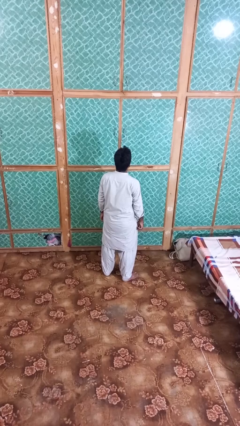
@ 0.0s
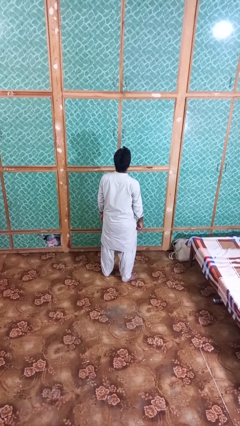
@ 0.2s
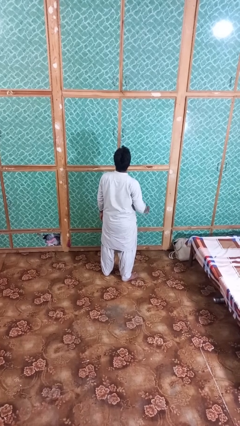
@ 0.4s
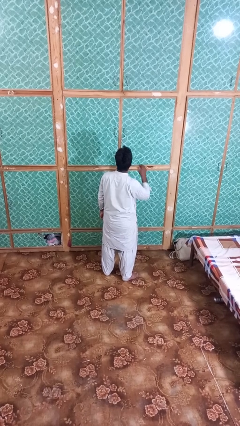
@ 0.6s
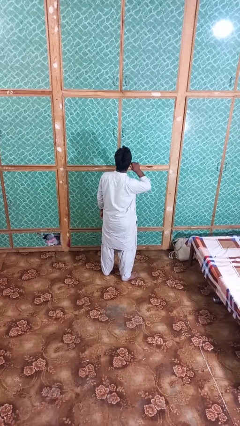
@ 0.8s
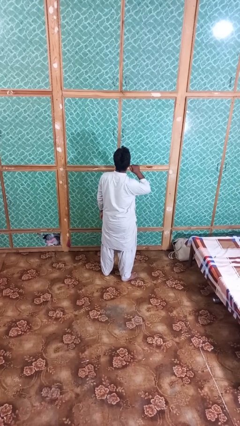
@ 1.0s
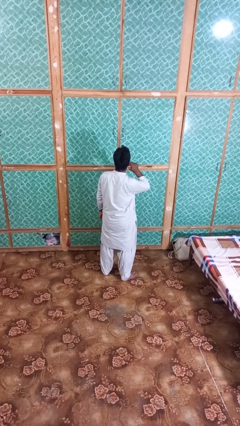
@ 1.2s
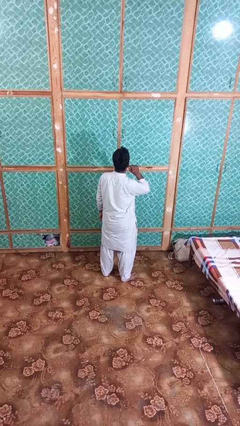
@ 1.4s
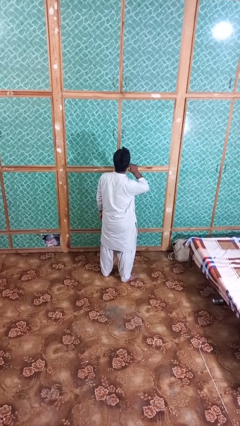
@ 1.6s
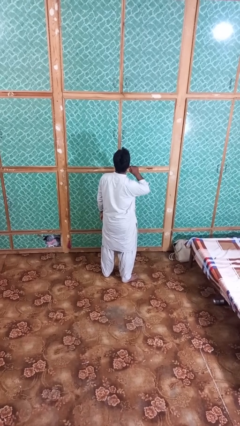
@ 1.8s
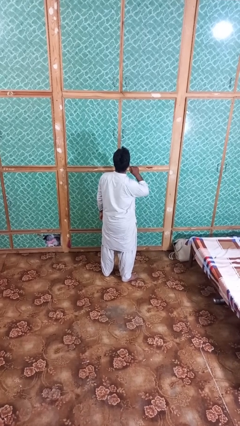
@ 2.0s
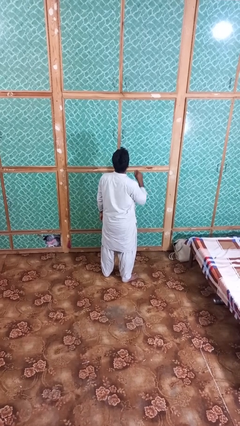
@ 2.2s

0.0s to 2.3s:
person touches earlobe

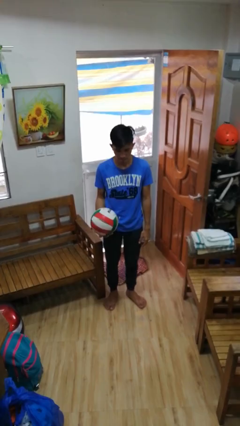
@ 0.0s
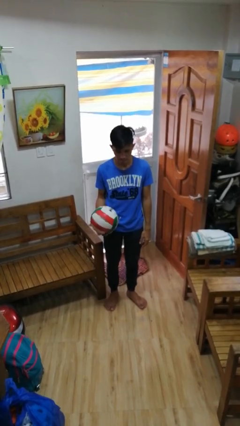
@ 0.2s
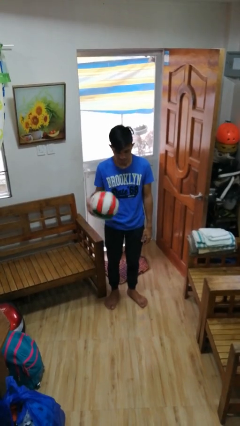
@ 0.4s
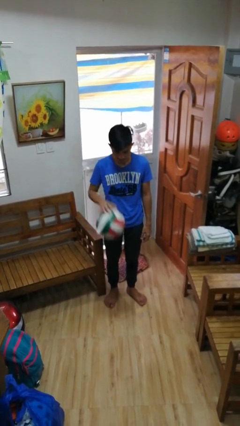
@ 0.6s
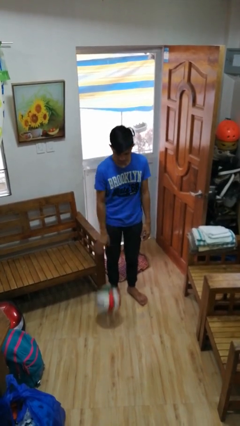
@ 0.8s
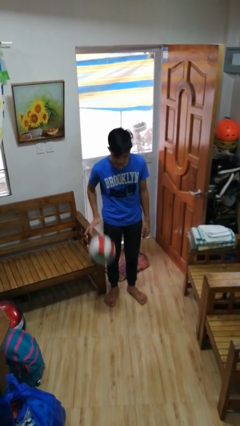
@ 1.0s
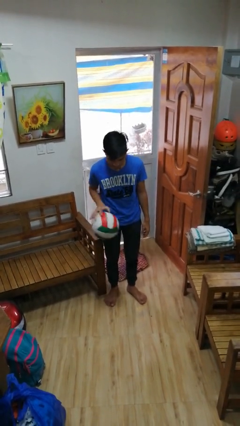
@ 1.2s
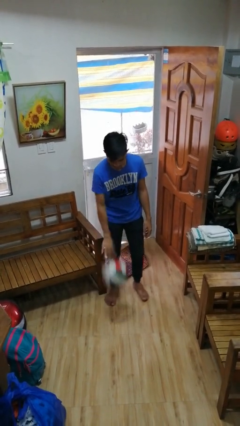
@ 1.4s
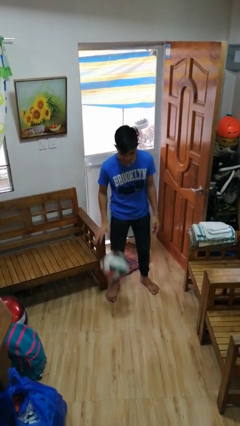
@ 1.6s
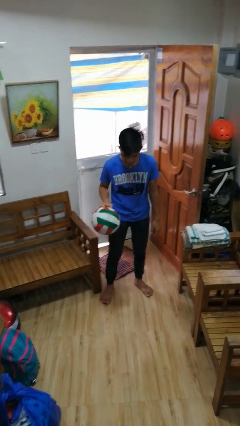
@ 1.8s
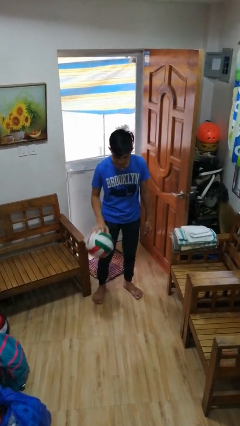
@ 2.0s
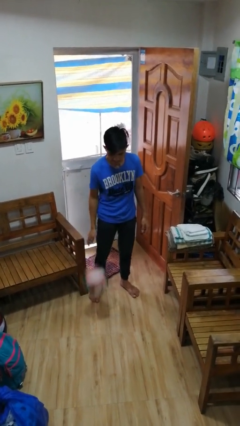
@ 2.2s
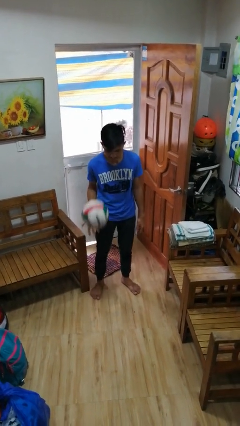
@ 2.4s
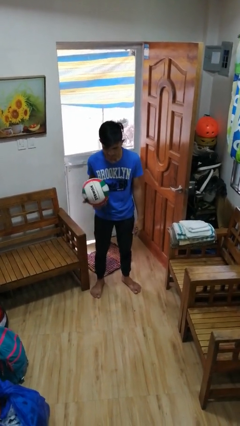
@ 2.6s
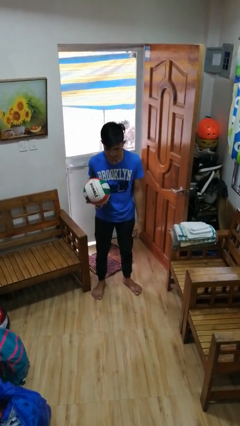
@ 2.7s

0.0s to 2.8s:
person bounces ball on floor

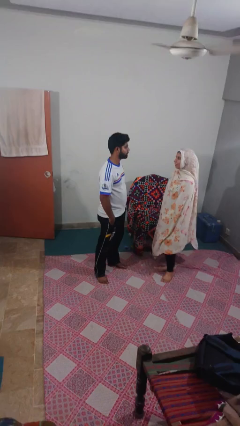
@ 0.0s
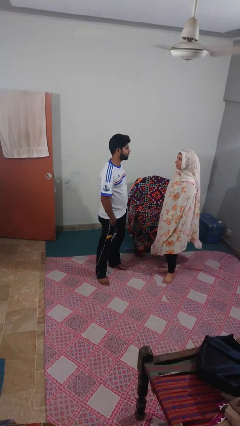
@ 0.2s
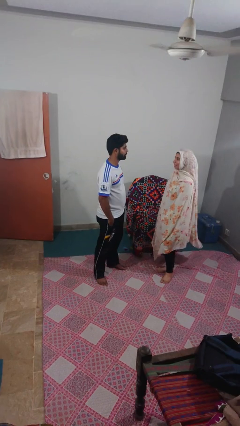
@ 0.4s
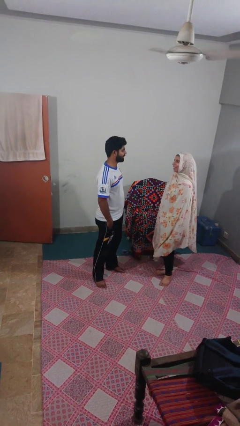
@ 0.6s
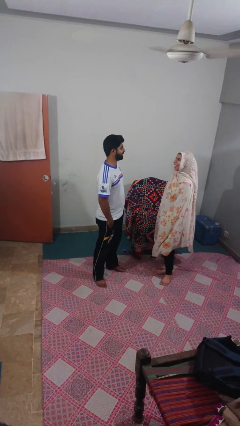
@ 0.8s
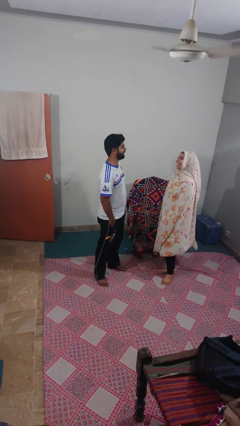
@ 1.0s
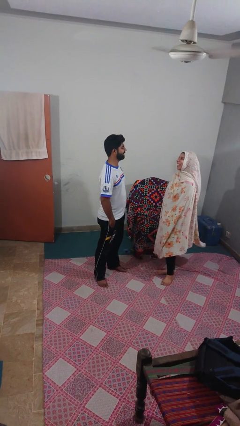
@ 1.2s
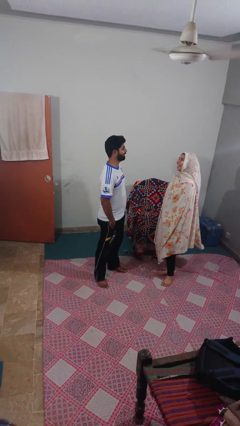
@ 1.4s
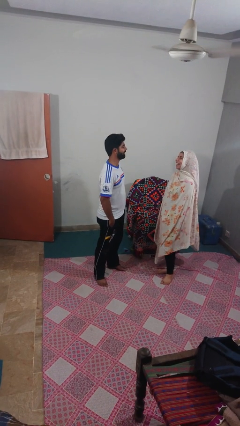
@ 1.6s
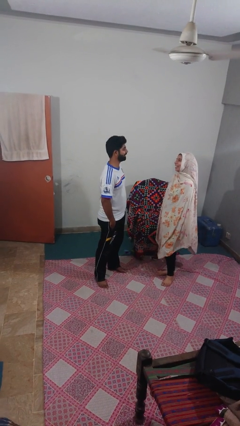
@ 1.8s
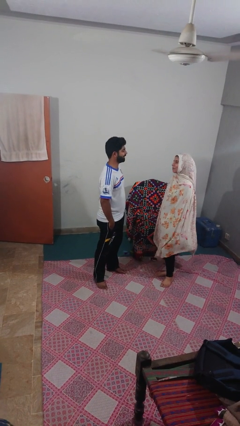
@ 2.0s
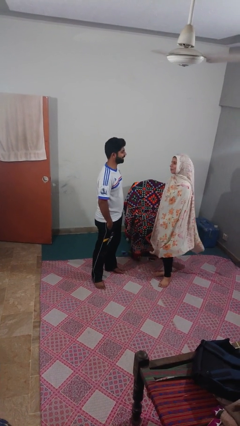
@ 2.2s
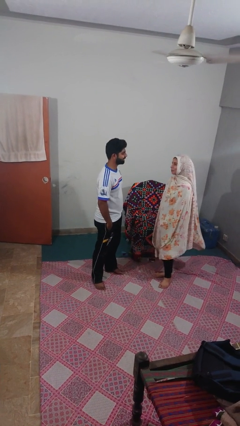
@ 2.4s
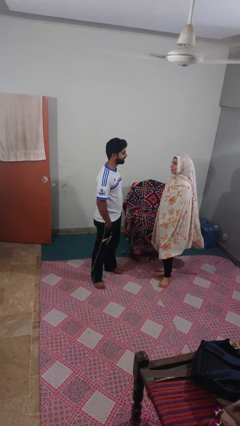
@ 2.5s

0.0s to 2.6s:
person laughs with person

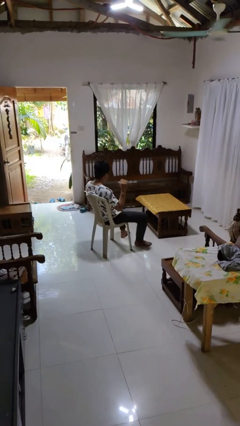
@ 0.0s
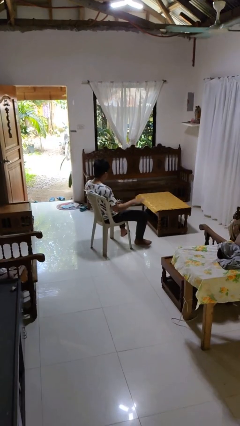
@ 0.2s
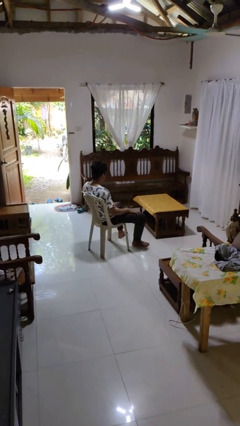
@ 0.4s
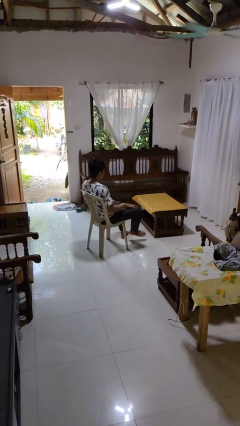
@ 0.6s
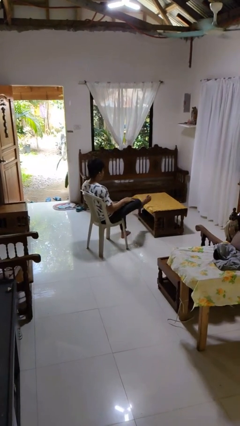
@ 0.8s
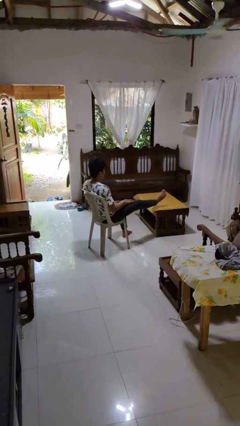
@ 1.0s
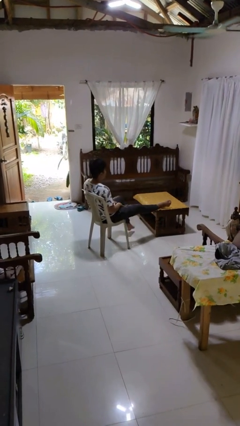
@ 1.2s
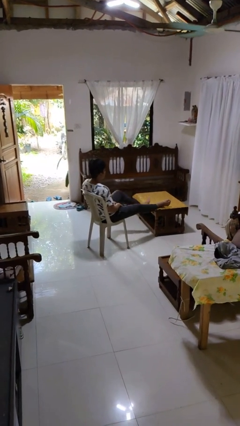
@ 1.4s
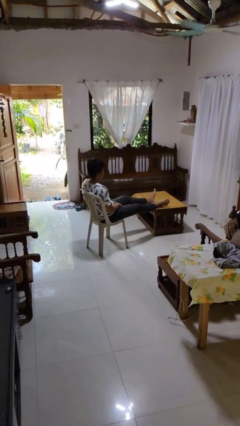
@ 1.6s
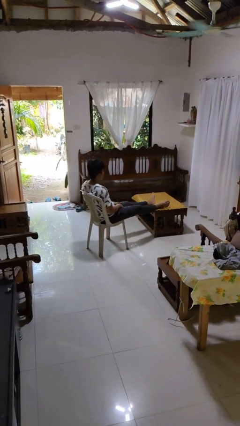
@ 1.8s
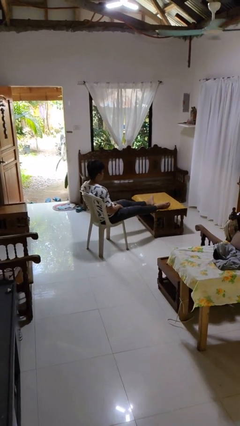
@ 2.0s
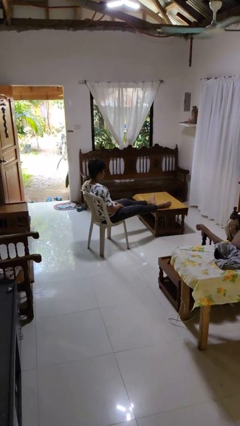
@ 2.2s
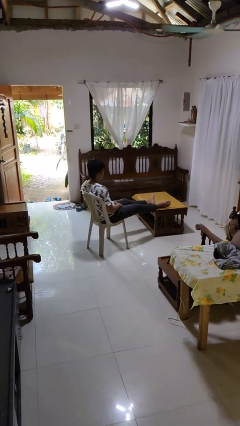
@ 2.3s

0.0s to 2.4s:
person puts feet up

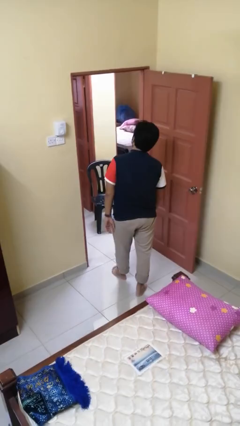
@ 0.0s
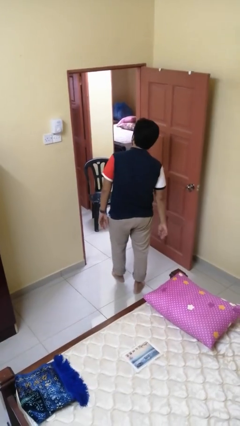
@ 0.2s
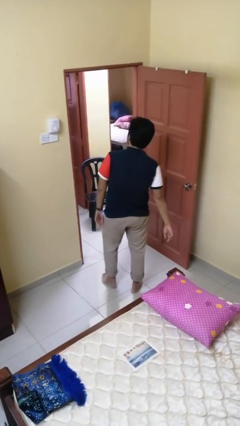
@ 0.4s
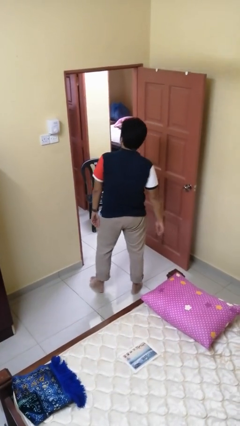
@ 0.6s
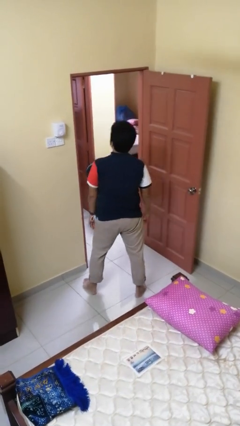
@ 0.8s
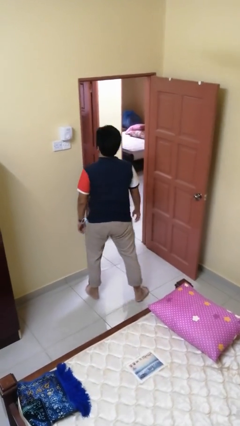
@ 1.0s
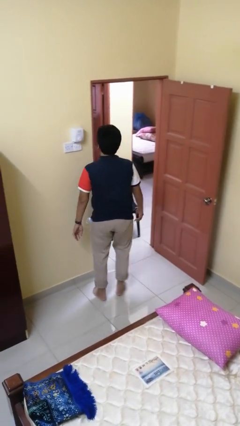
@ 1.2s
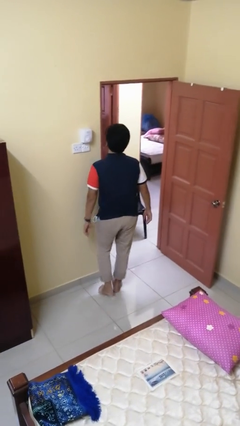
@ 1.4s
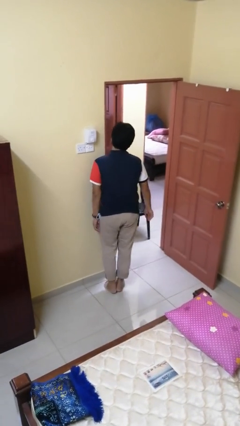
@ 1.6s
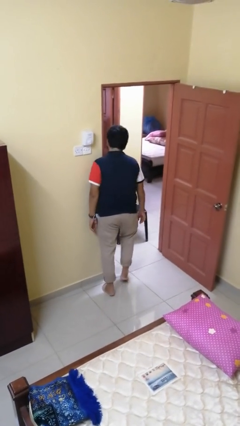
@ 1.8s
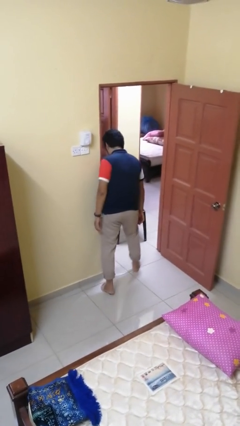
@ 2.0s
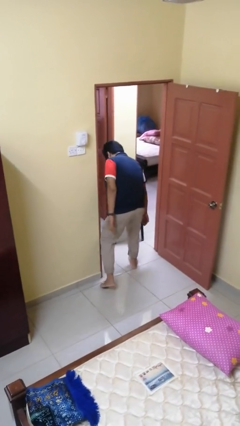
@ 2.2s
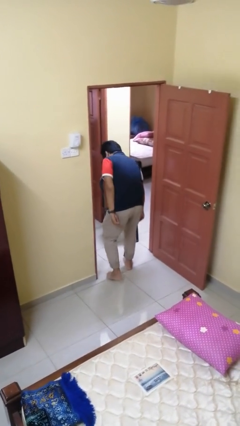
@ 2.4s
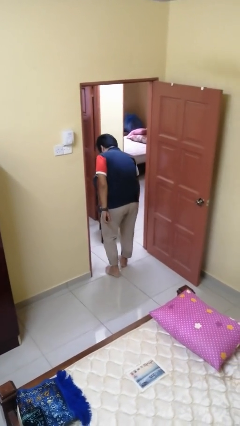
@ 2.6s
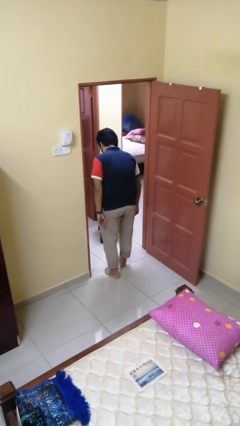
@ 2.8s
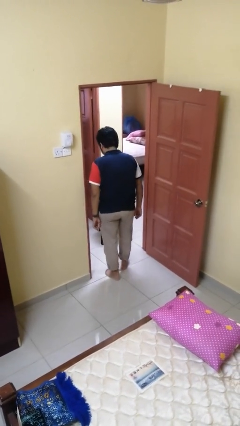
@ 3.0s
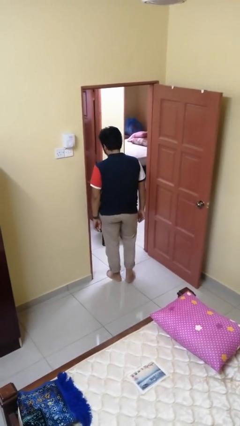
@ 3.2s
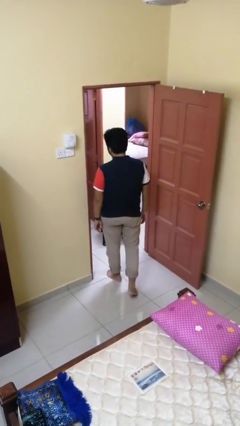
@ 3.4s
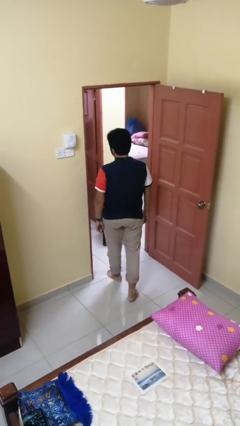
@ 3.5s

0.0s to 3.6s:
person bumps into wall

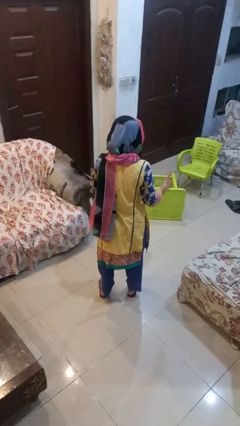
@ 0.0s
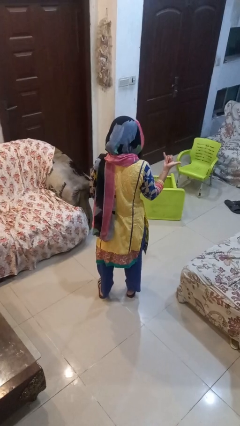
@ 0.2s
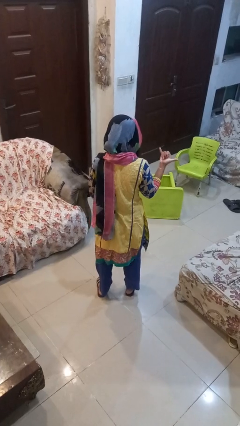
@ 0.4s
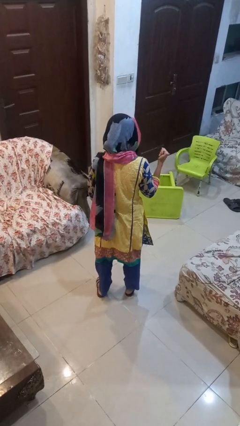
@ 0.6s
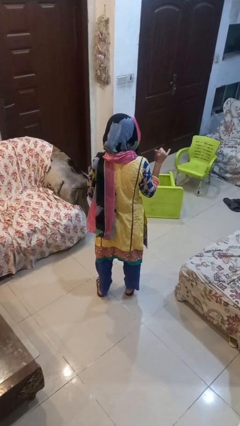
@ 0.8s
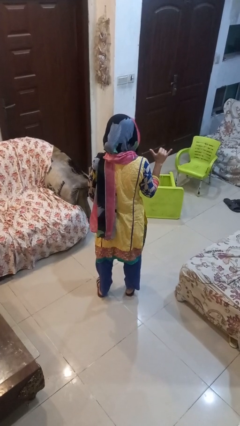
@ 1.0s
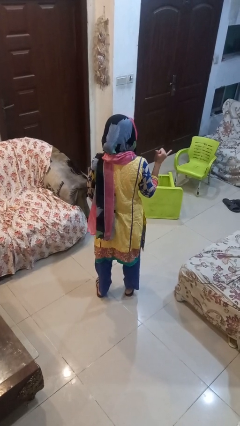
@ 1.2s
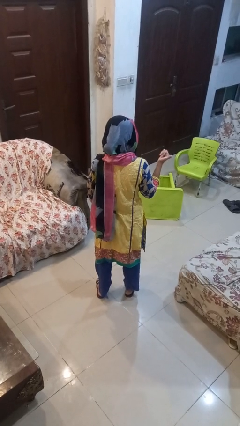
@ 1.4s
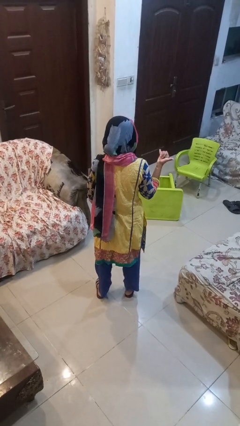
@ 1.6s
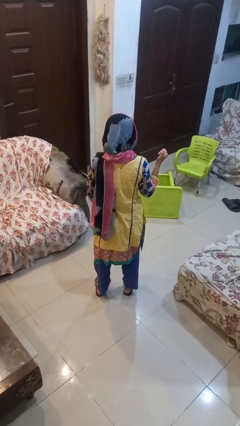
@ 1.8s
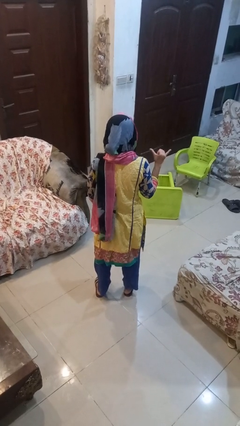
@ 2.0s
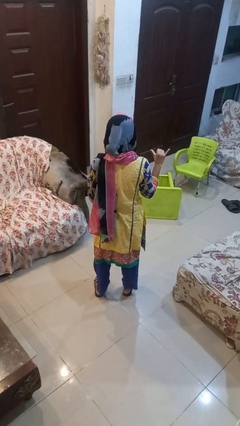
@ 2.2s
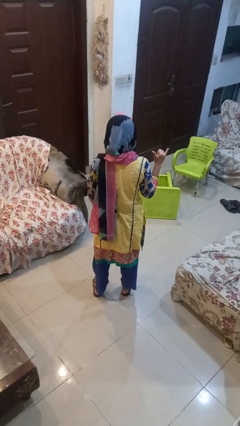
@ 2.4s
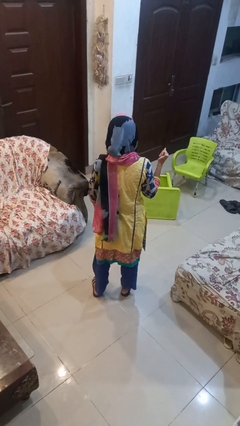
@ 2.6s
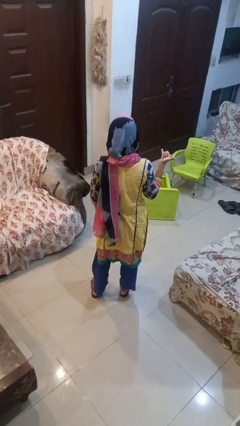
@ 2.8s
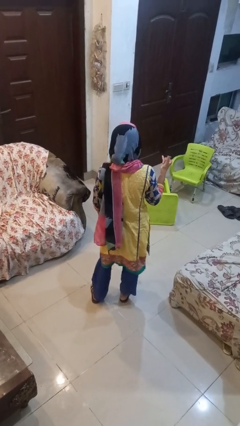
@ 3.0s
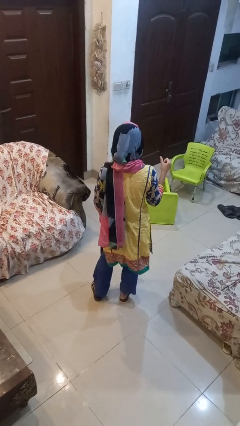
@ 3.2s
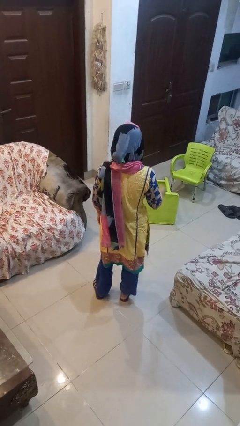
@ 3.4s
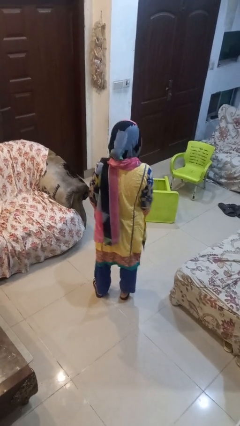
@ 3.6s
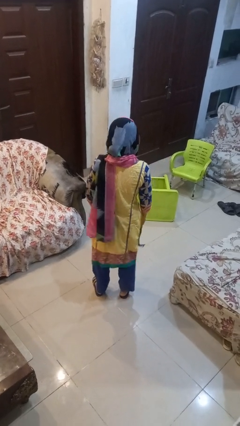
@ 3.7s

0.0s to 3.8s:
person gestures hang loose
